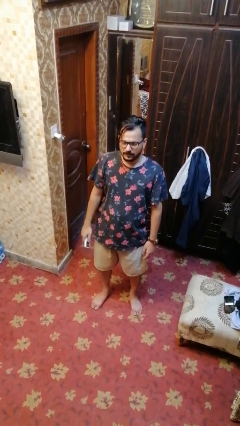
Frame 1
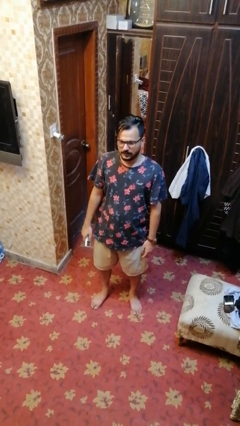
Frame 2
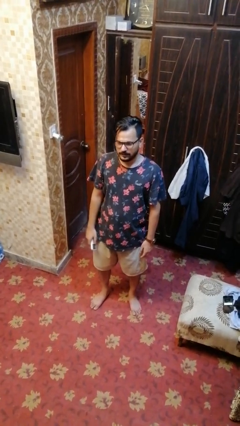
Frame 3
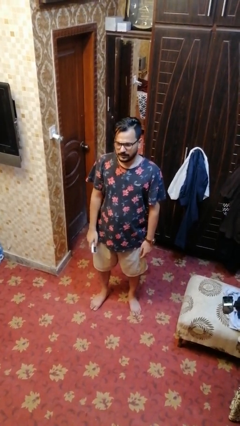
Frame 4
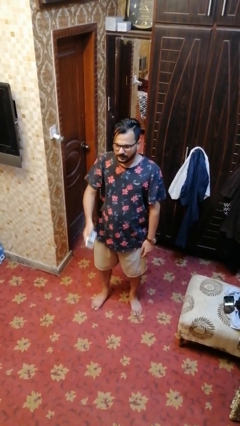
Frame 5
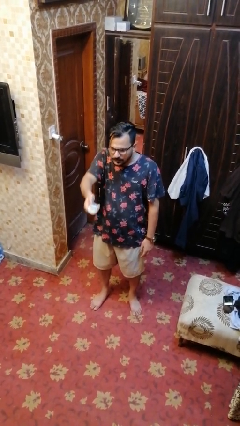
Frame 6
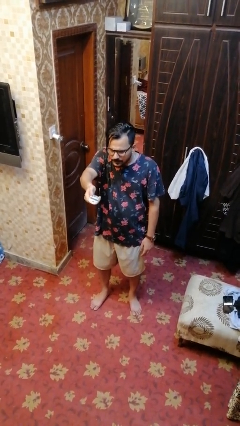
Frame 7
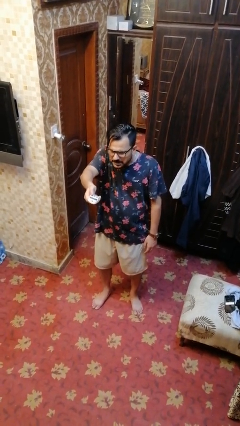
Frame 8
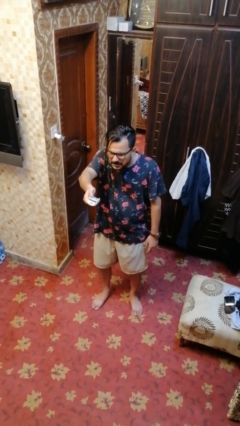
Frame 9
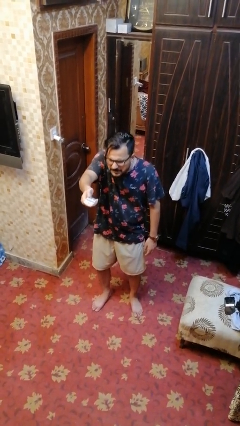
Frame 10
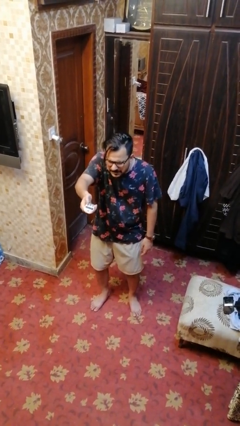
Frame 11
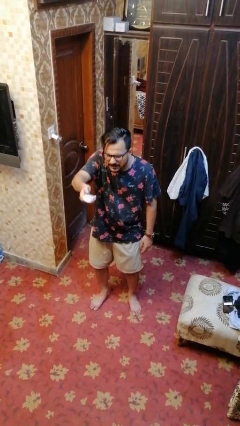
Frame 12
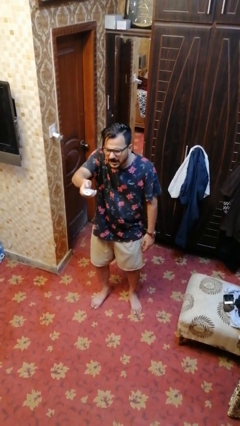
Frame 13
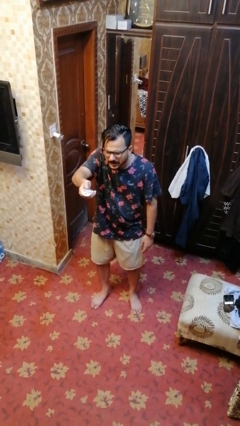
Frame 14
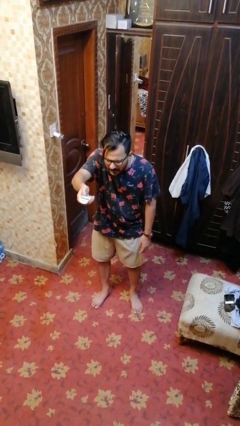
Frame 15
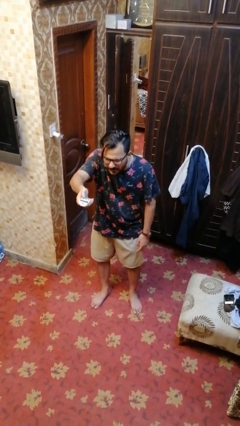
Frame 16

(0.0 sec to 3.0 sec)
person uses television remote

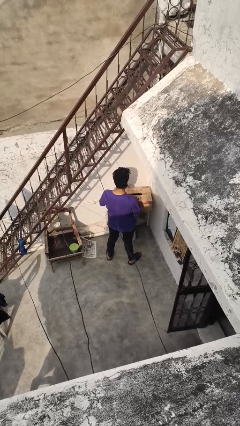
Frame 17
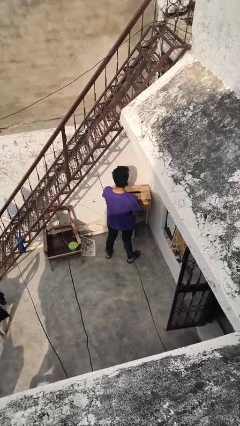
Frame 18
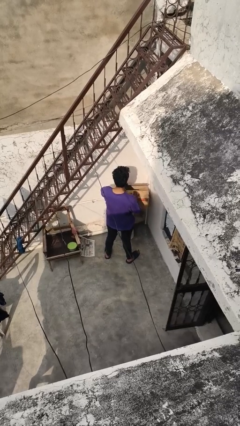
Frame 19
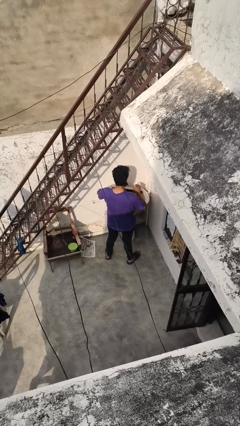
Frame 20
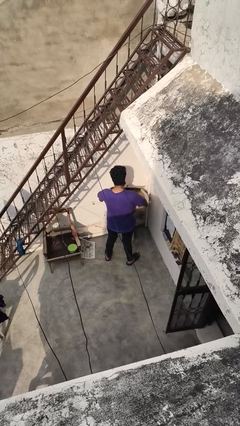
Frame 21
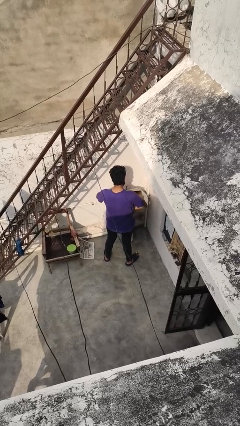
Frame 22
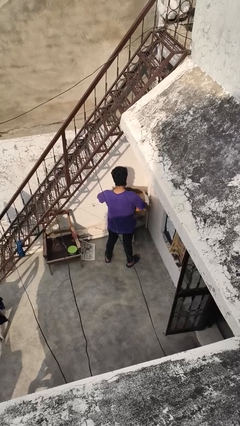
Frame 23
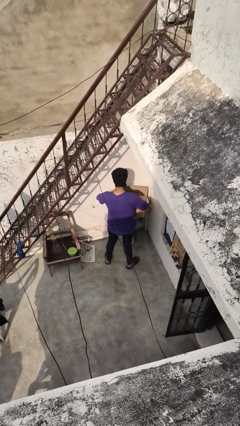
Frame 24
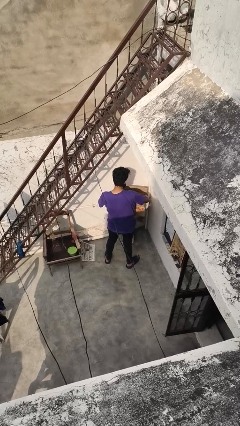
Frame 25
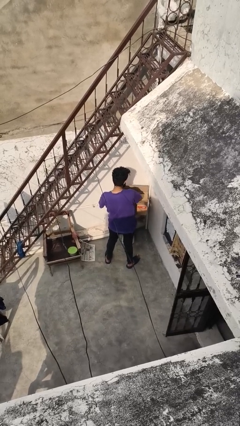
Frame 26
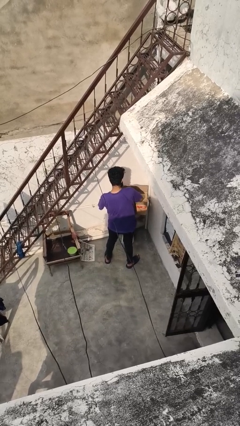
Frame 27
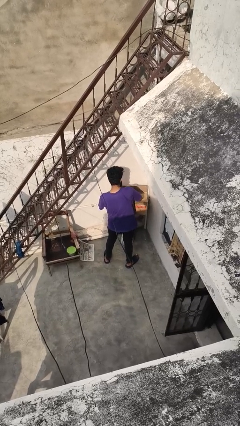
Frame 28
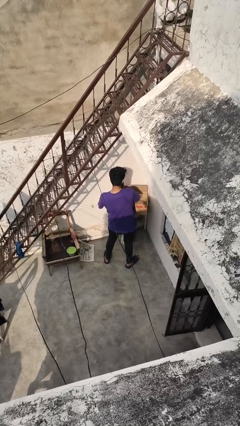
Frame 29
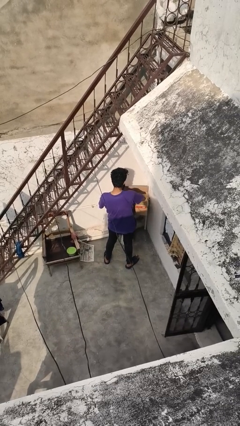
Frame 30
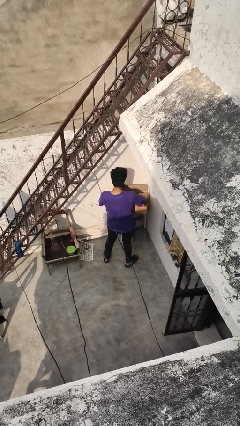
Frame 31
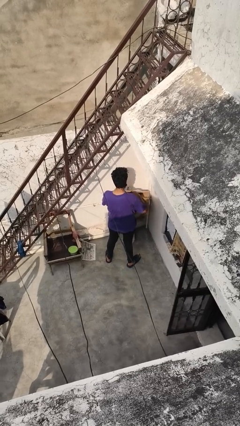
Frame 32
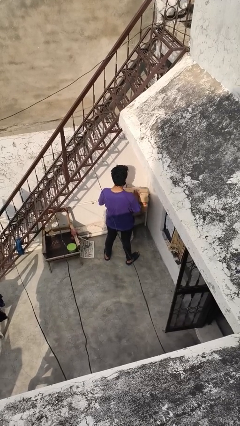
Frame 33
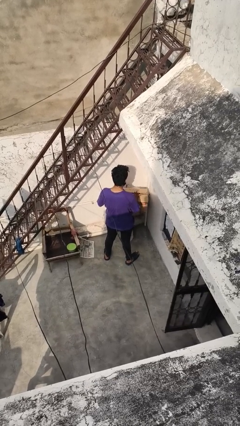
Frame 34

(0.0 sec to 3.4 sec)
person searches in box

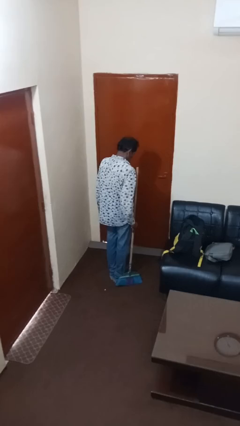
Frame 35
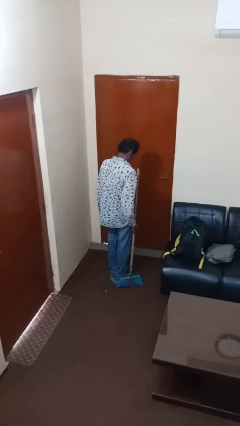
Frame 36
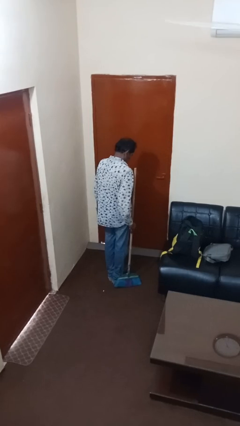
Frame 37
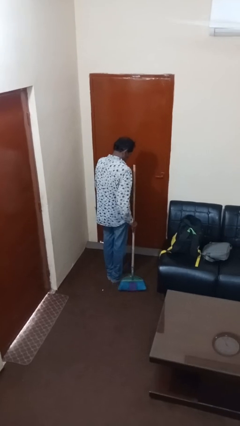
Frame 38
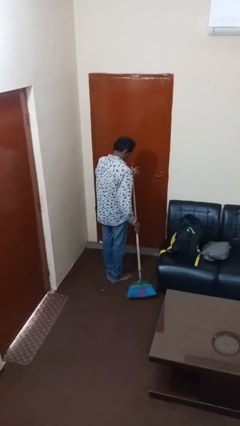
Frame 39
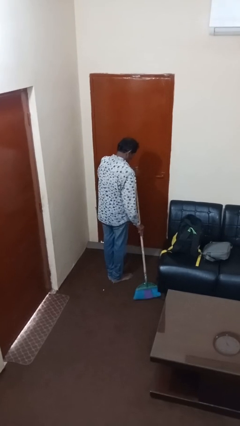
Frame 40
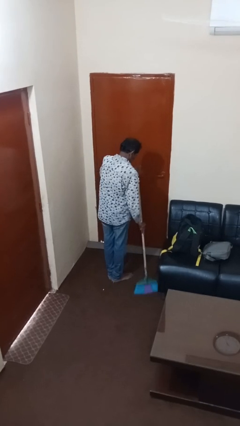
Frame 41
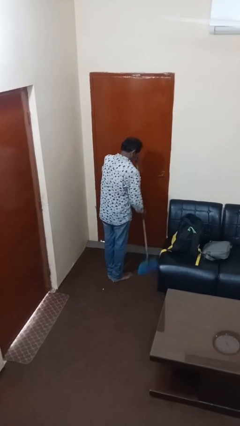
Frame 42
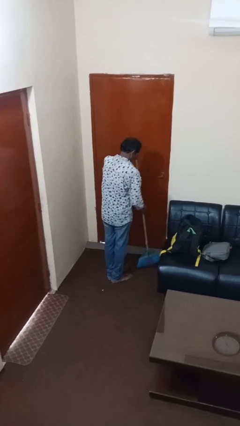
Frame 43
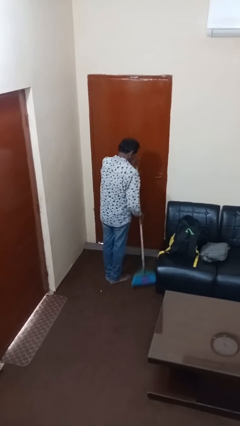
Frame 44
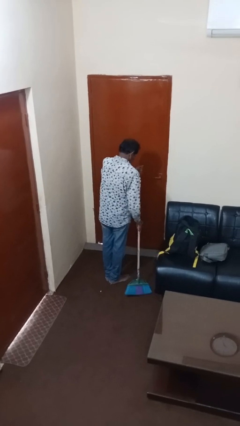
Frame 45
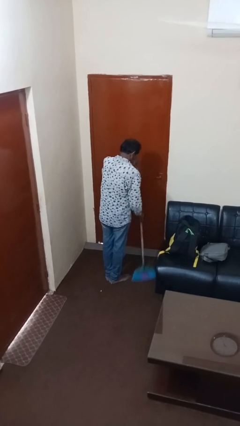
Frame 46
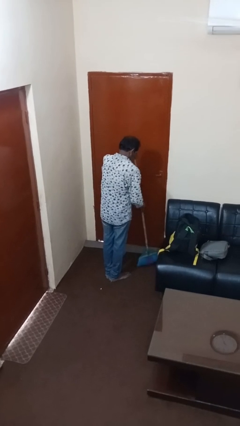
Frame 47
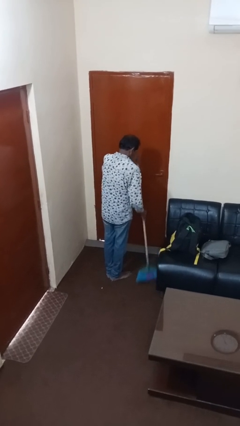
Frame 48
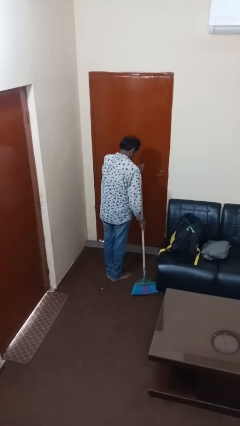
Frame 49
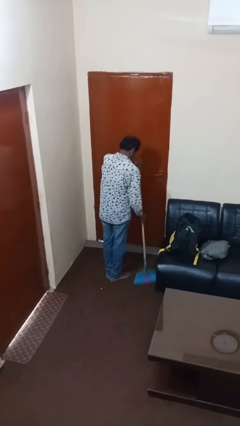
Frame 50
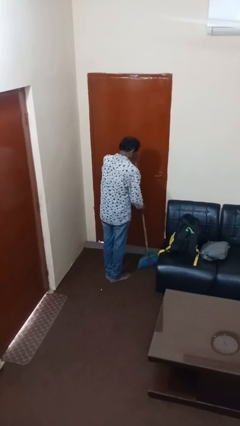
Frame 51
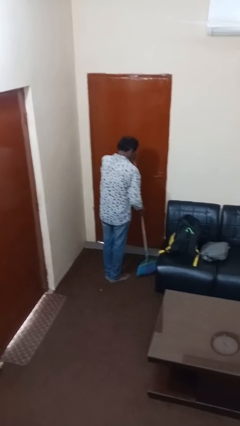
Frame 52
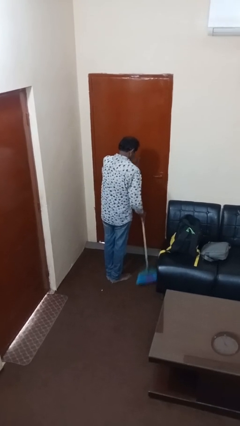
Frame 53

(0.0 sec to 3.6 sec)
person sweeps floor

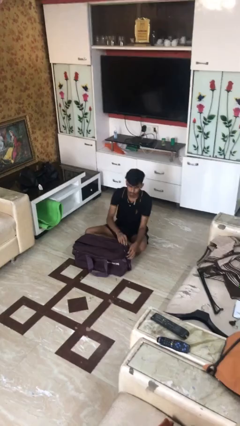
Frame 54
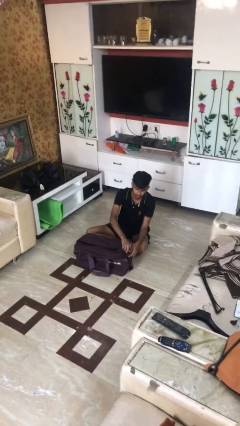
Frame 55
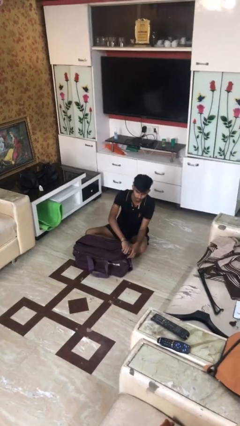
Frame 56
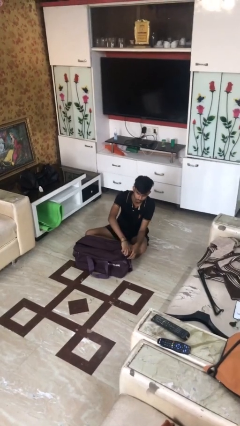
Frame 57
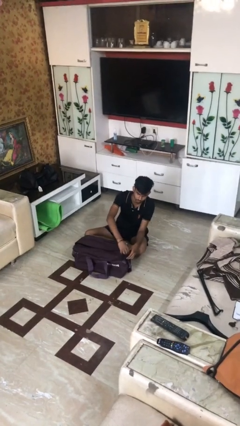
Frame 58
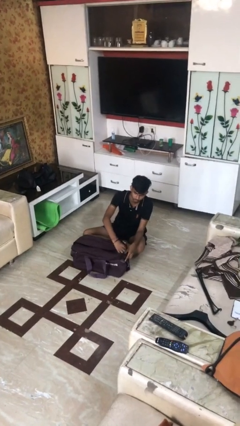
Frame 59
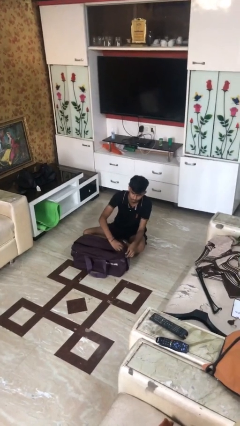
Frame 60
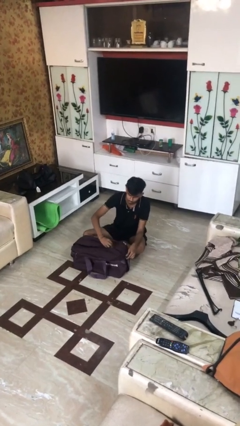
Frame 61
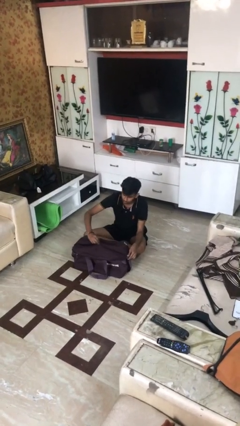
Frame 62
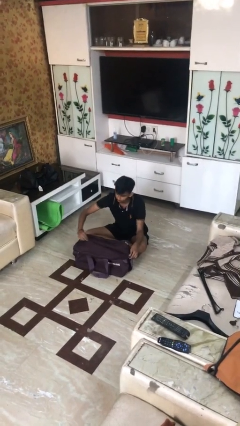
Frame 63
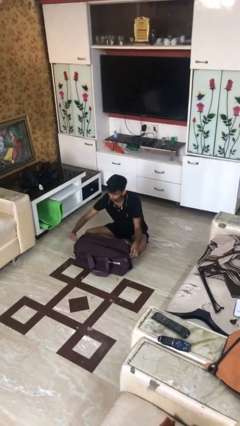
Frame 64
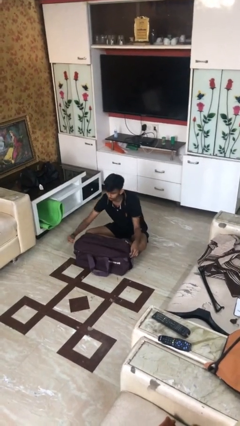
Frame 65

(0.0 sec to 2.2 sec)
person closes suitcase

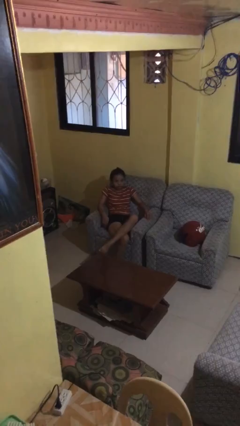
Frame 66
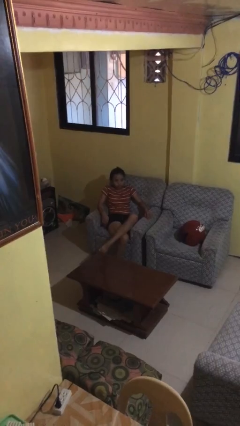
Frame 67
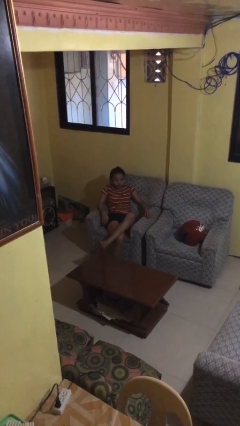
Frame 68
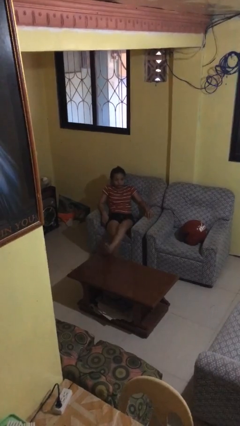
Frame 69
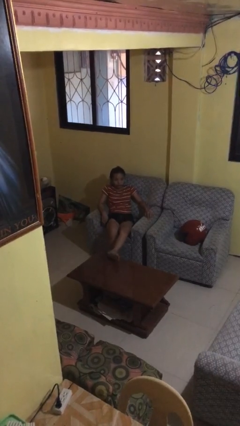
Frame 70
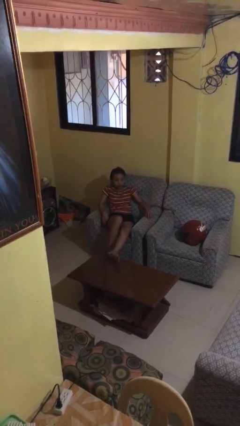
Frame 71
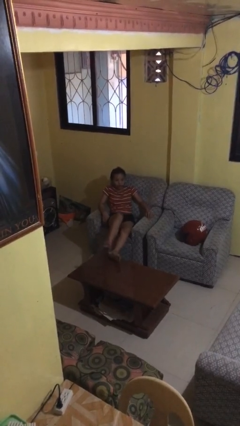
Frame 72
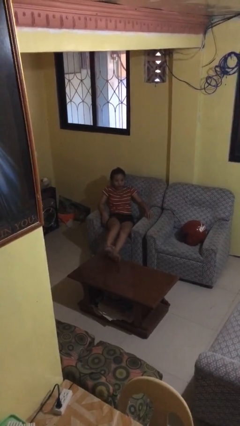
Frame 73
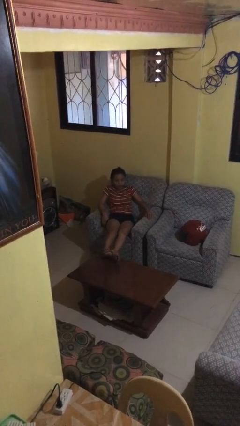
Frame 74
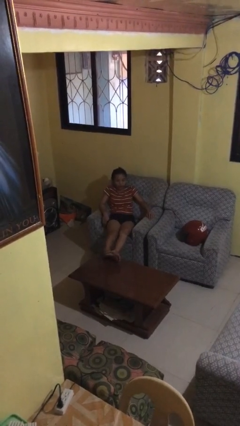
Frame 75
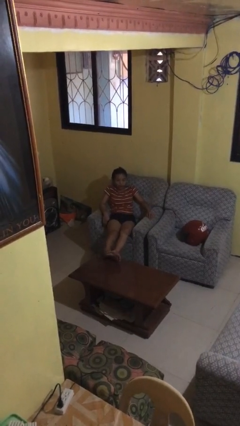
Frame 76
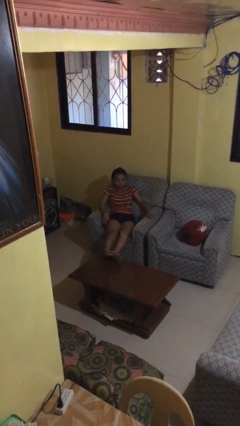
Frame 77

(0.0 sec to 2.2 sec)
person puts feet up

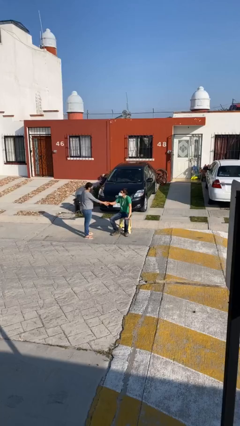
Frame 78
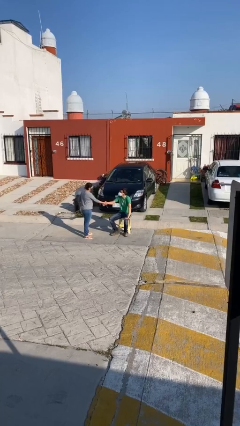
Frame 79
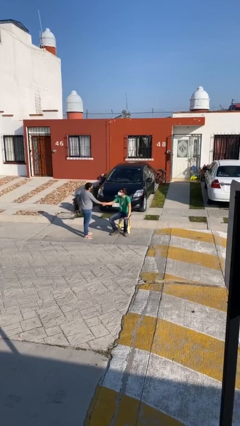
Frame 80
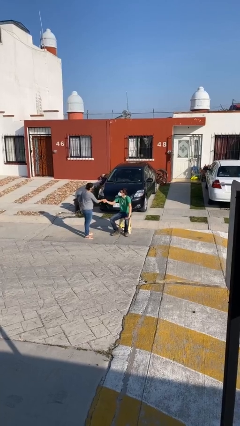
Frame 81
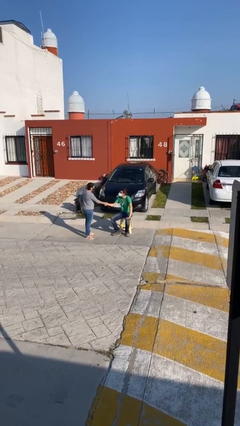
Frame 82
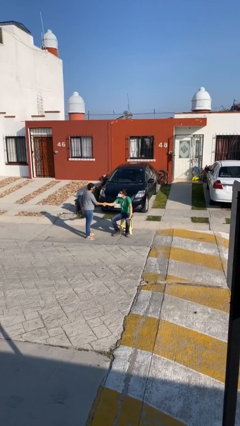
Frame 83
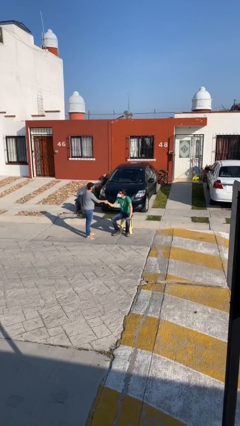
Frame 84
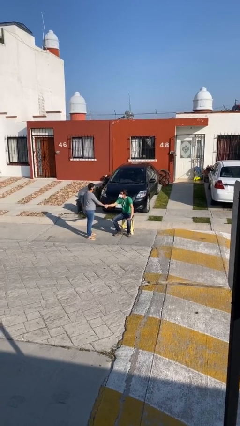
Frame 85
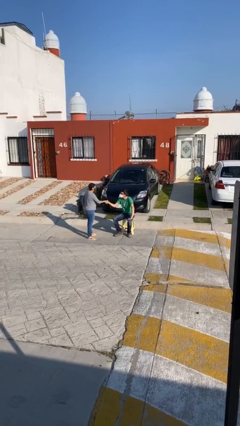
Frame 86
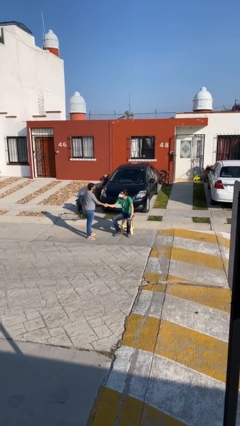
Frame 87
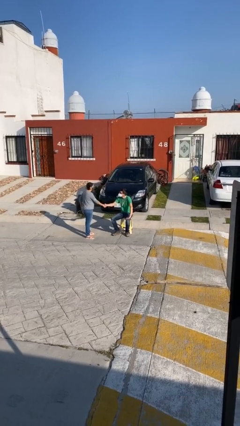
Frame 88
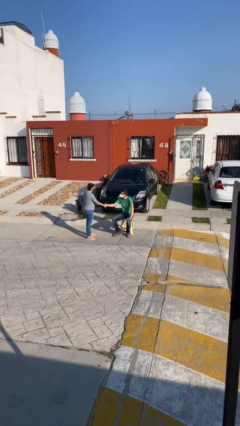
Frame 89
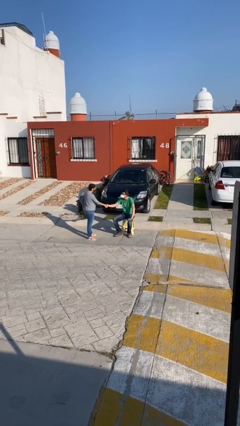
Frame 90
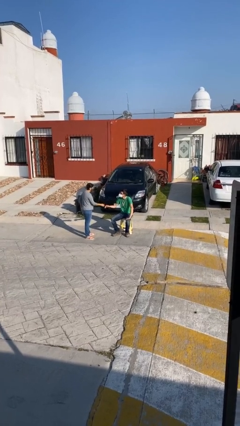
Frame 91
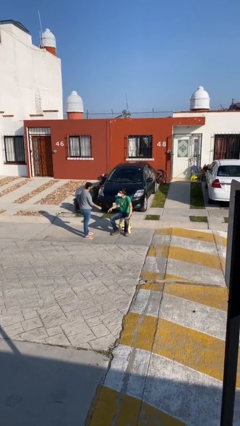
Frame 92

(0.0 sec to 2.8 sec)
person shakes hand
